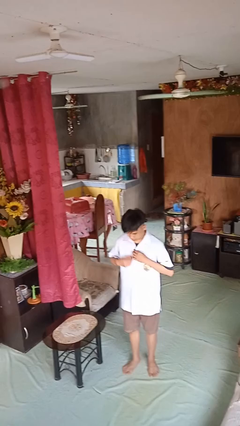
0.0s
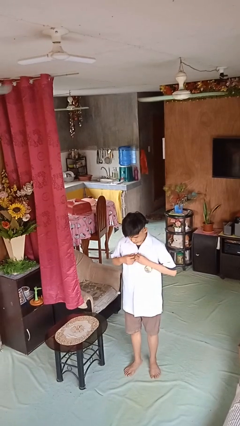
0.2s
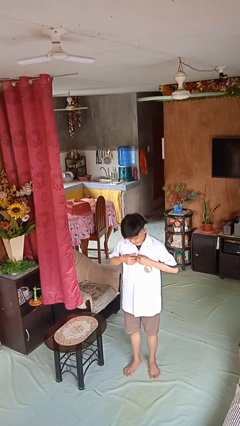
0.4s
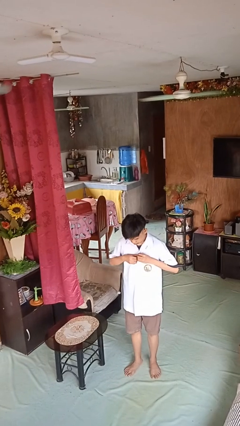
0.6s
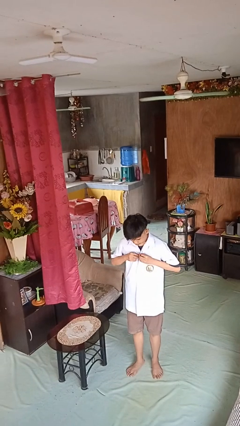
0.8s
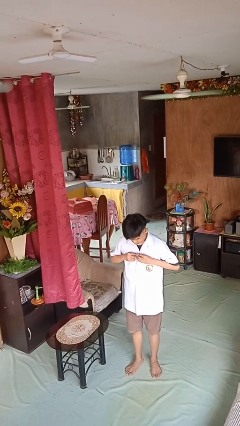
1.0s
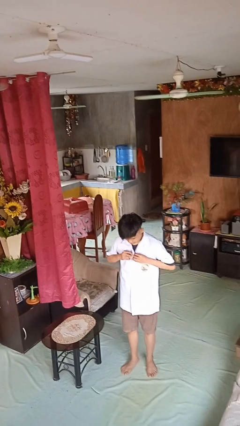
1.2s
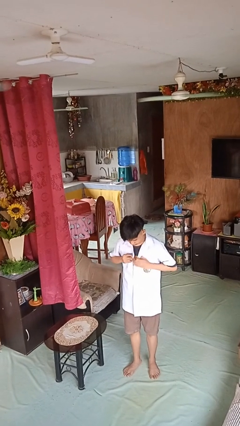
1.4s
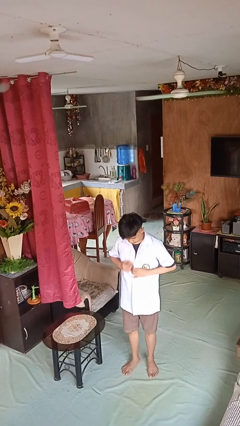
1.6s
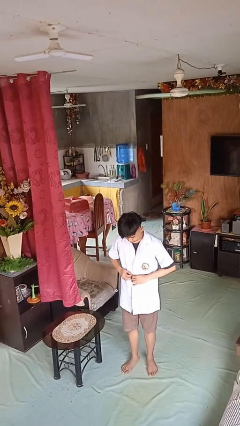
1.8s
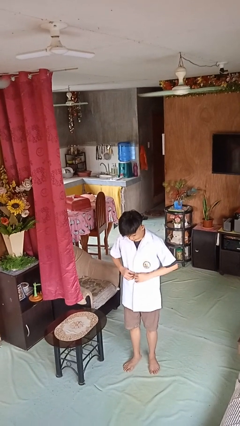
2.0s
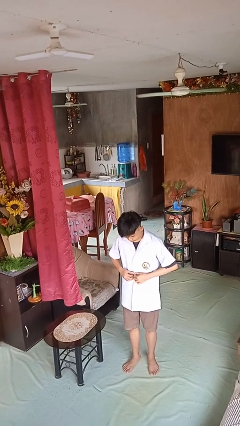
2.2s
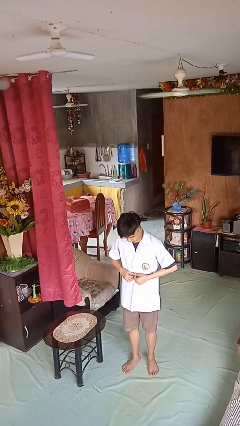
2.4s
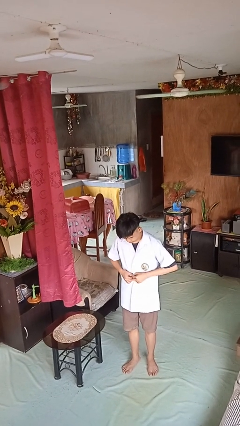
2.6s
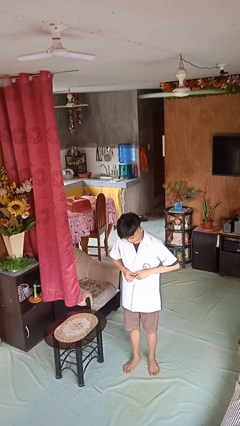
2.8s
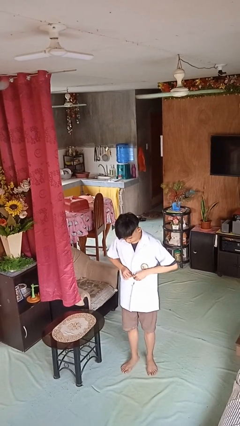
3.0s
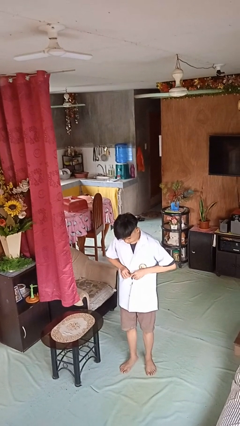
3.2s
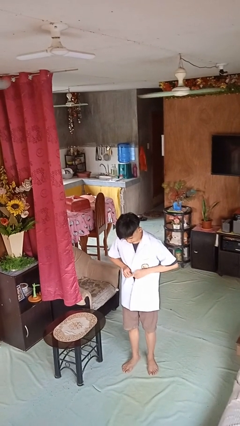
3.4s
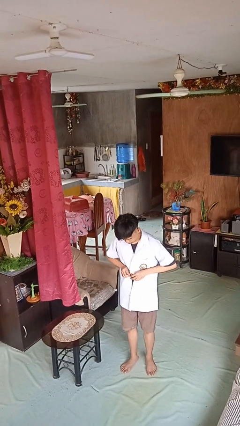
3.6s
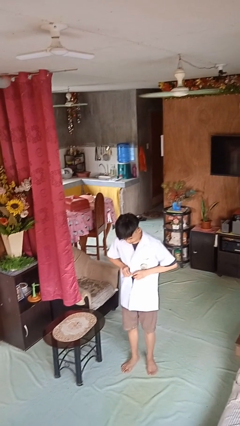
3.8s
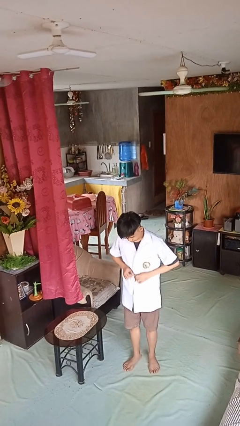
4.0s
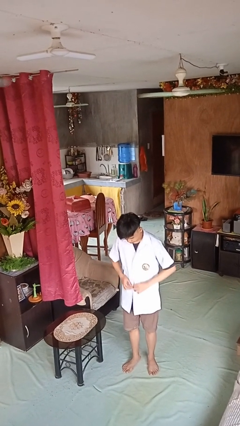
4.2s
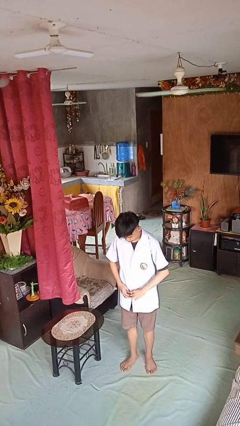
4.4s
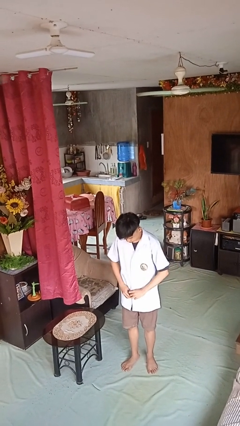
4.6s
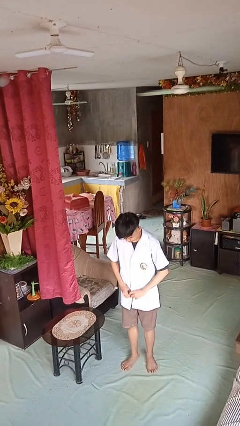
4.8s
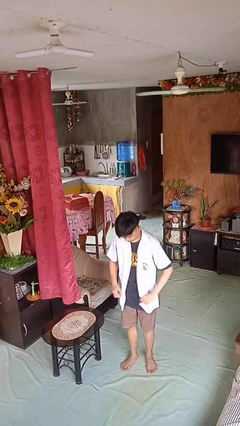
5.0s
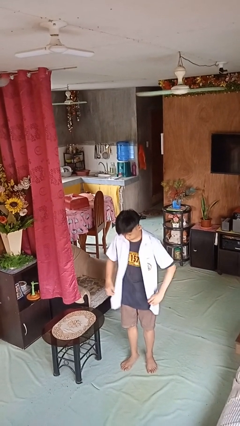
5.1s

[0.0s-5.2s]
person unbuttons shirt

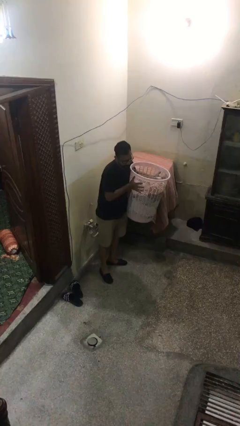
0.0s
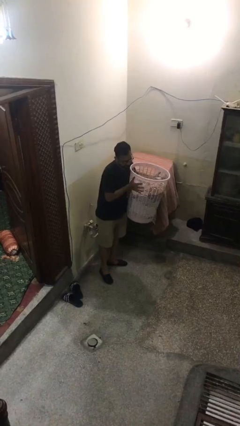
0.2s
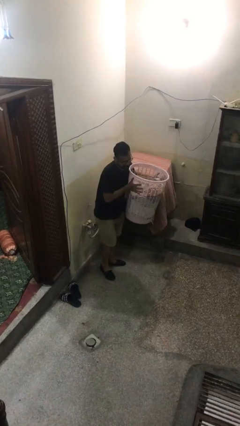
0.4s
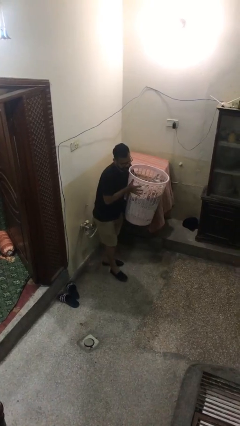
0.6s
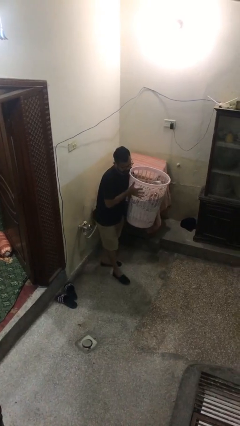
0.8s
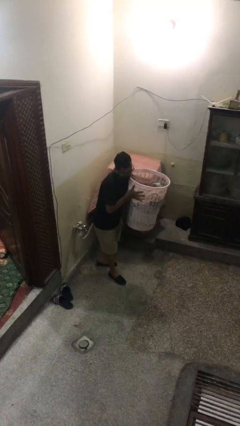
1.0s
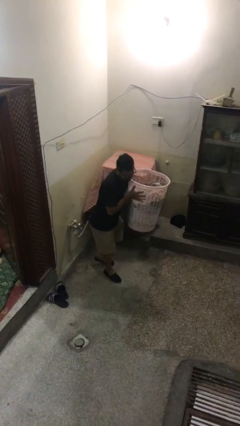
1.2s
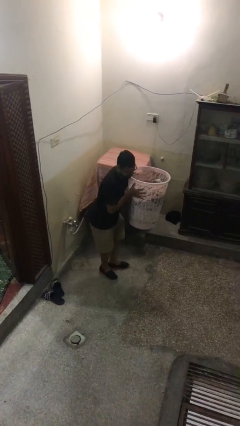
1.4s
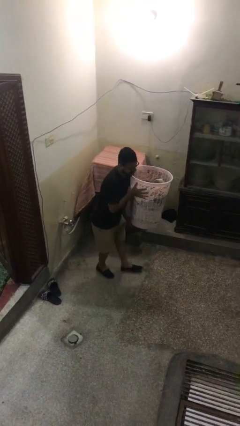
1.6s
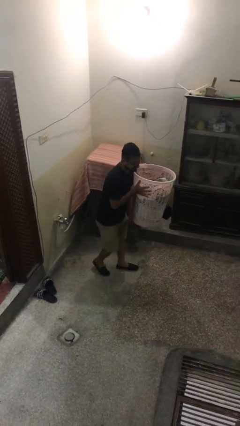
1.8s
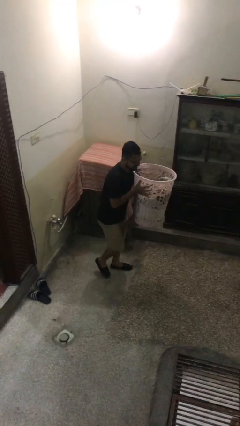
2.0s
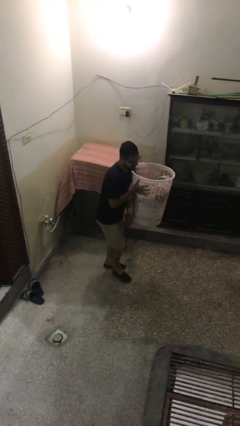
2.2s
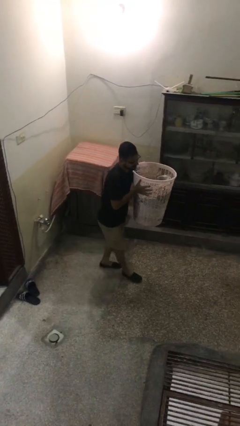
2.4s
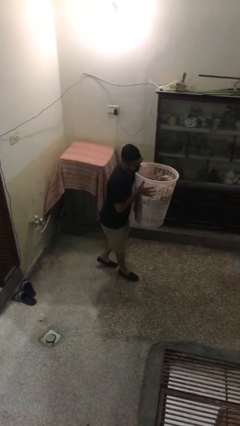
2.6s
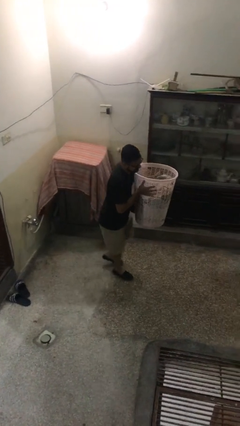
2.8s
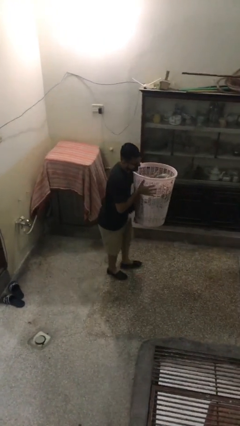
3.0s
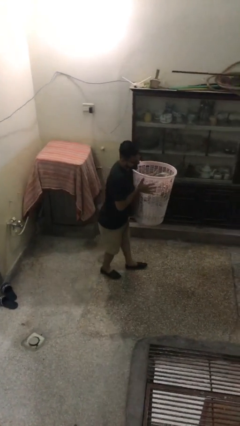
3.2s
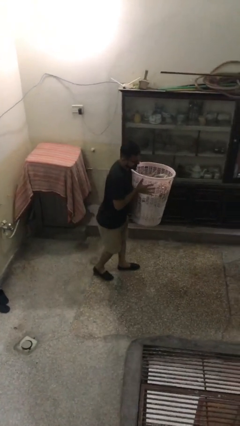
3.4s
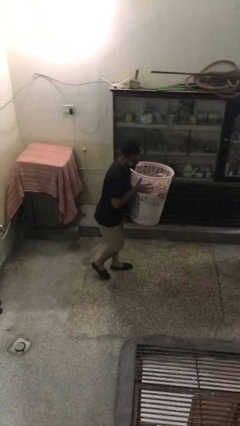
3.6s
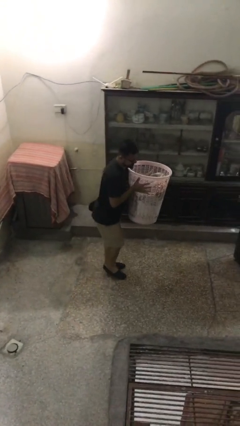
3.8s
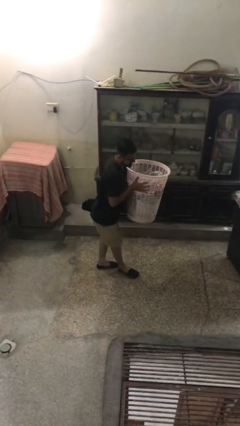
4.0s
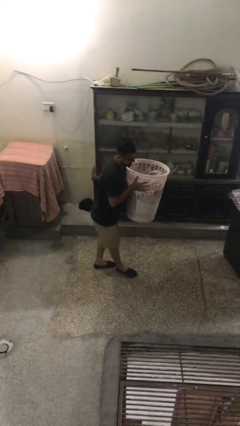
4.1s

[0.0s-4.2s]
person carries heavy object

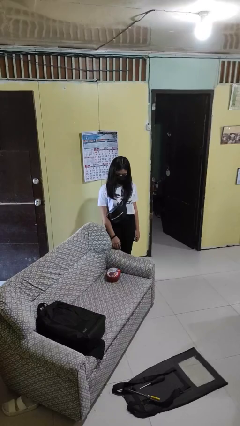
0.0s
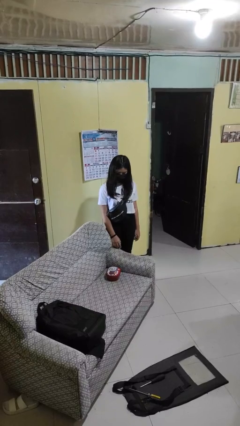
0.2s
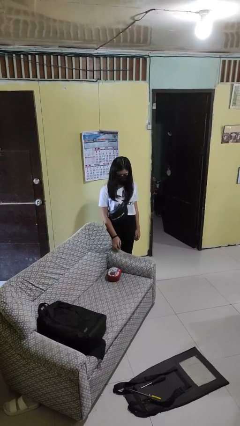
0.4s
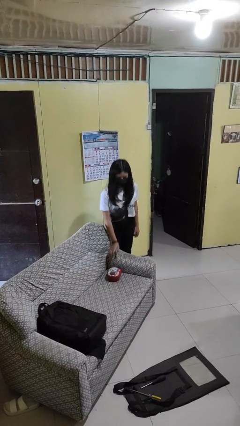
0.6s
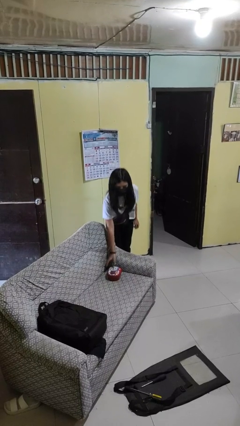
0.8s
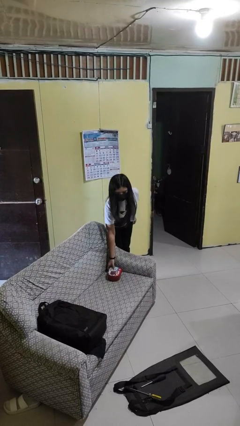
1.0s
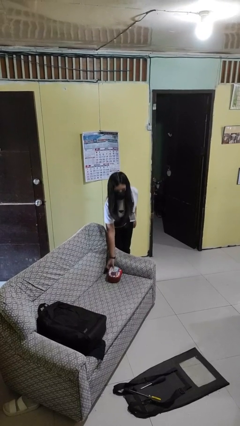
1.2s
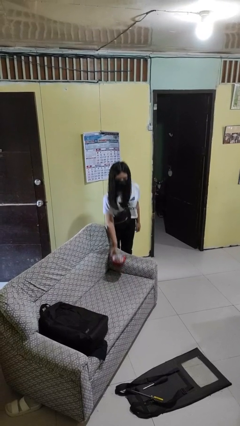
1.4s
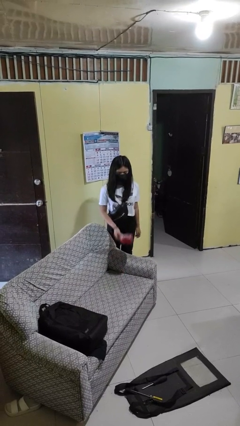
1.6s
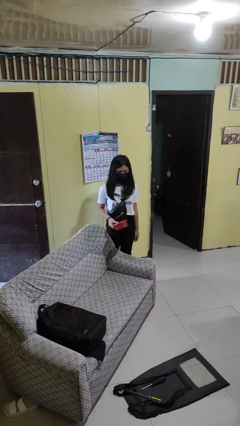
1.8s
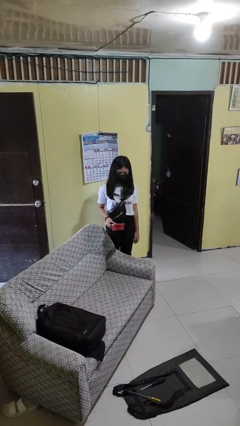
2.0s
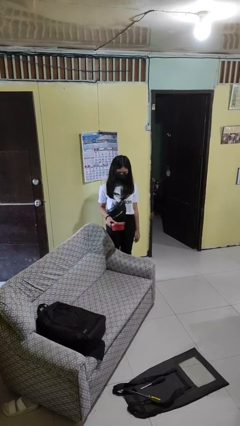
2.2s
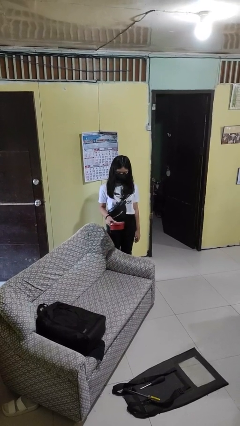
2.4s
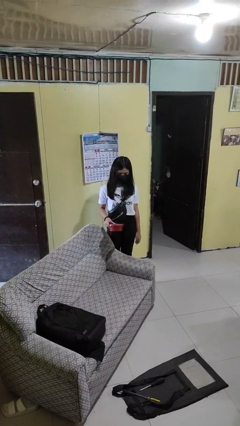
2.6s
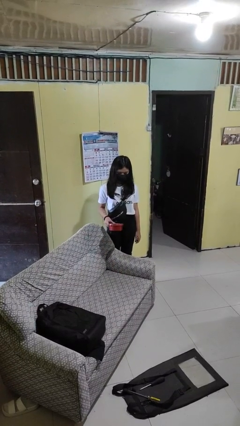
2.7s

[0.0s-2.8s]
person picks up object from couch

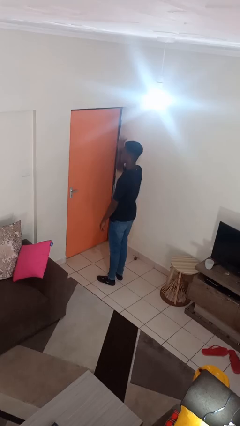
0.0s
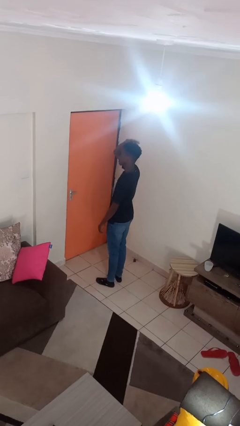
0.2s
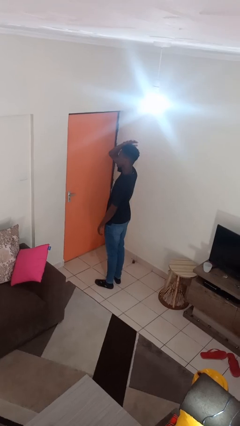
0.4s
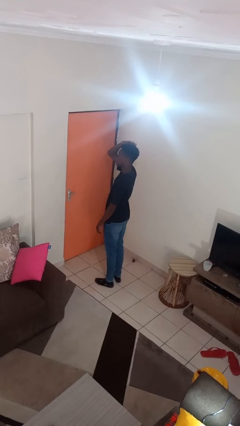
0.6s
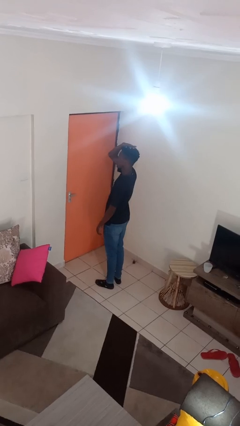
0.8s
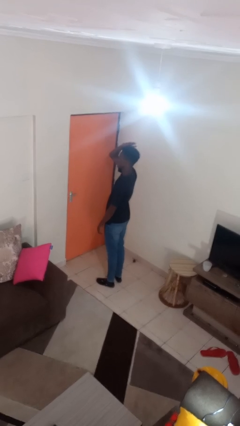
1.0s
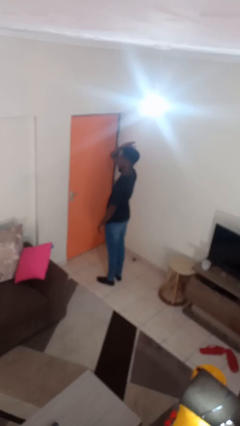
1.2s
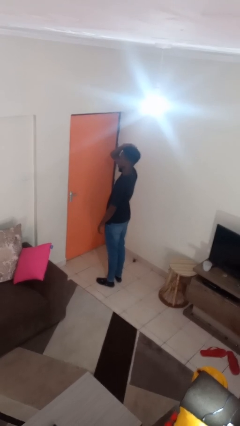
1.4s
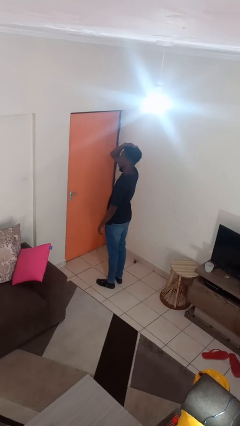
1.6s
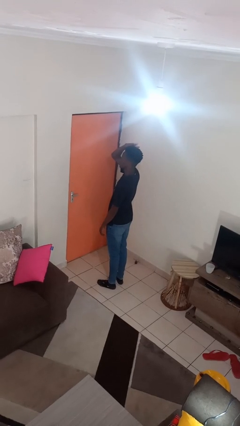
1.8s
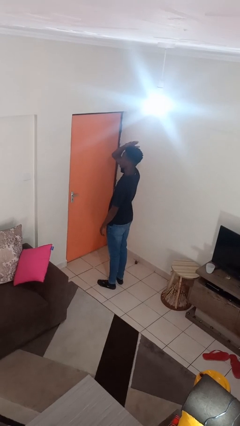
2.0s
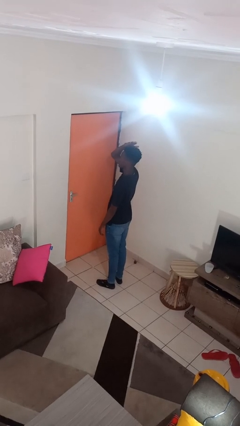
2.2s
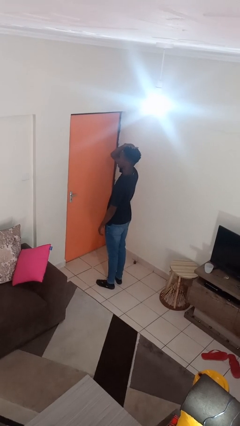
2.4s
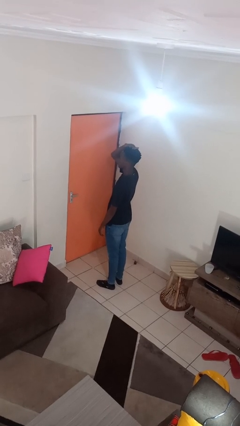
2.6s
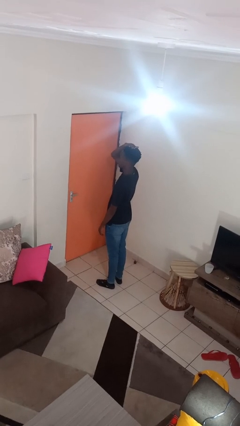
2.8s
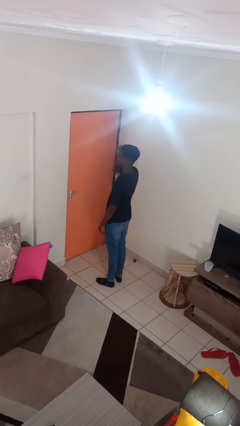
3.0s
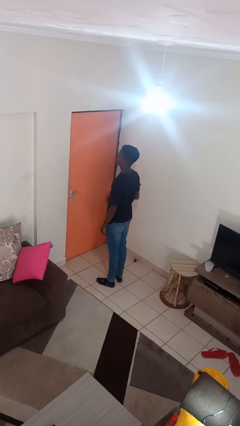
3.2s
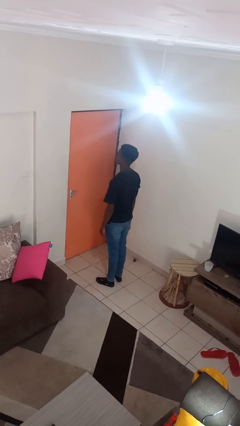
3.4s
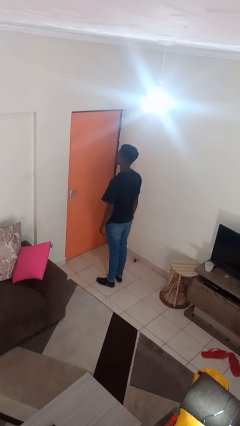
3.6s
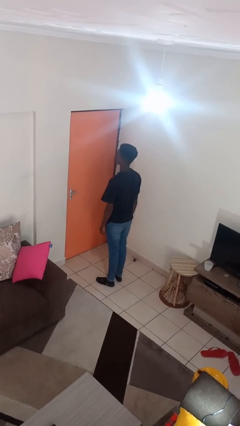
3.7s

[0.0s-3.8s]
person pats head

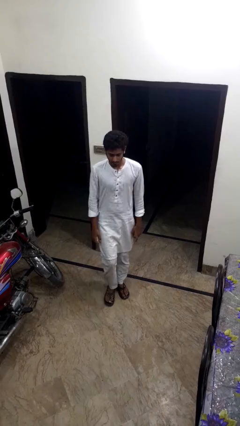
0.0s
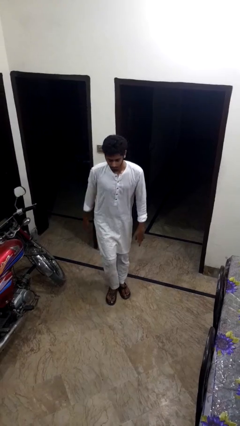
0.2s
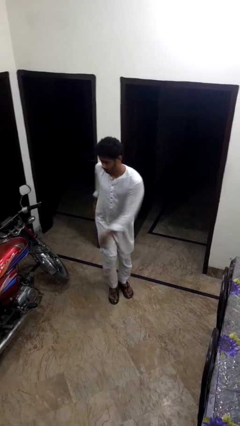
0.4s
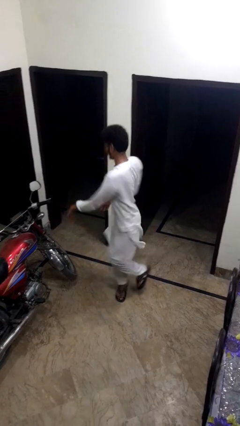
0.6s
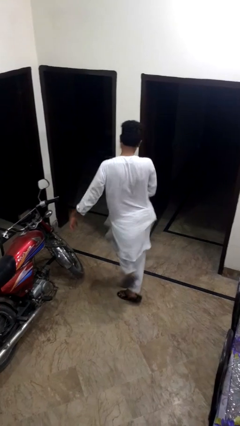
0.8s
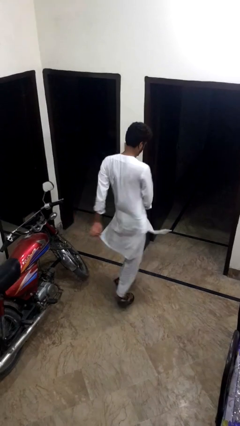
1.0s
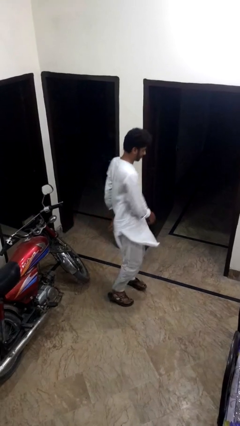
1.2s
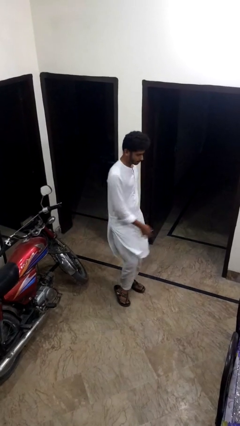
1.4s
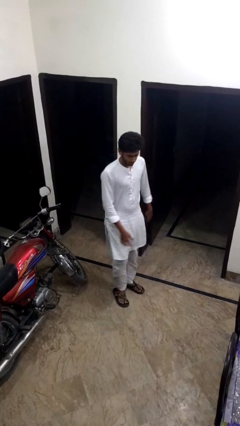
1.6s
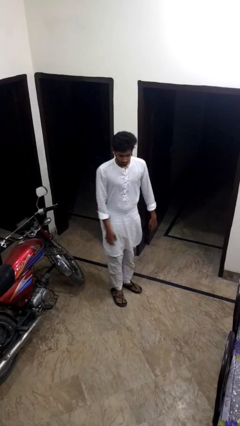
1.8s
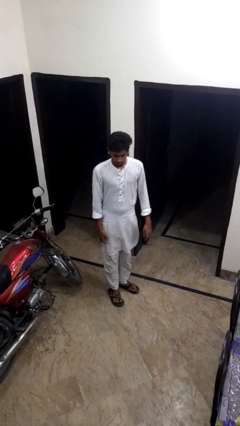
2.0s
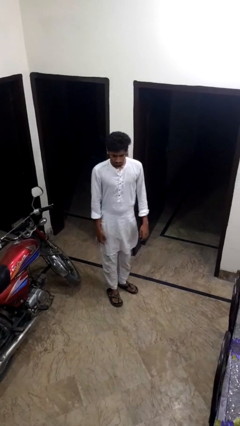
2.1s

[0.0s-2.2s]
person twirls
